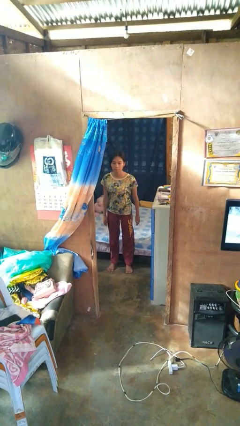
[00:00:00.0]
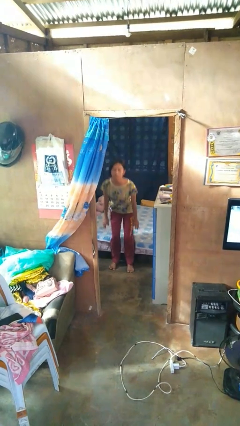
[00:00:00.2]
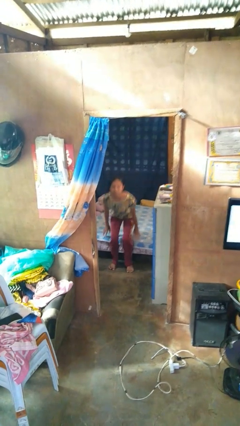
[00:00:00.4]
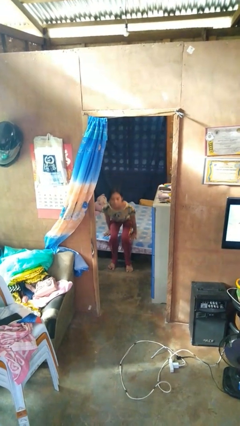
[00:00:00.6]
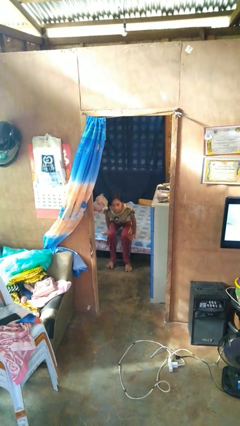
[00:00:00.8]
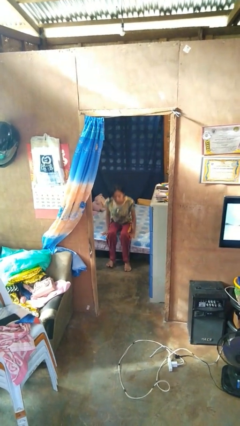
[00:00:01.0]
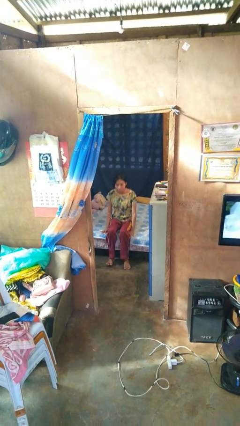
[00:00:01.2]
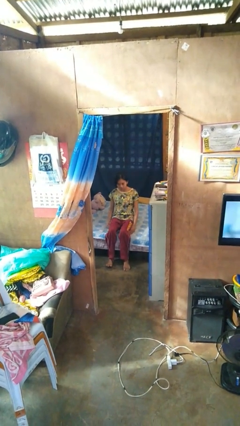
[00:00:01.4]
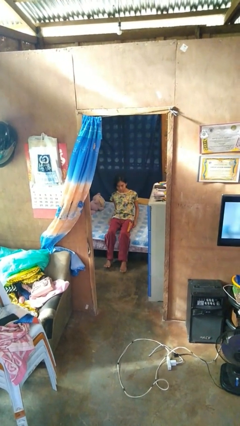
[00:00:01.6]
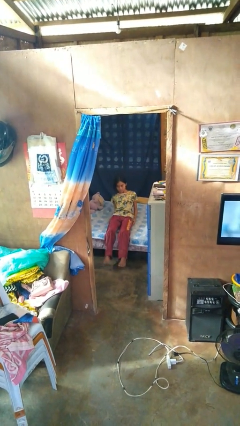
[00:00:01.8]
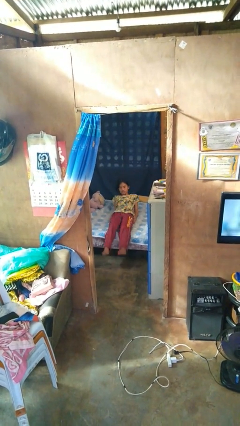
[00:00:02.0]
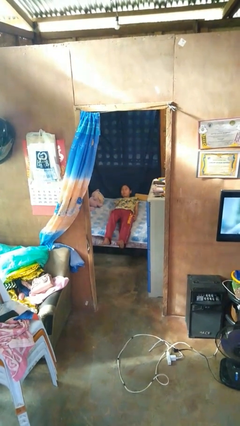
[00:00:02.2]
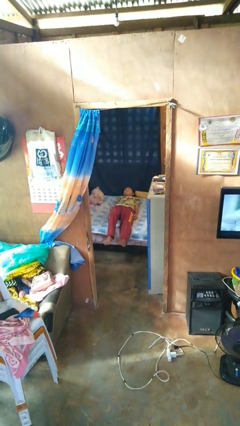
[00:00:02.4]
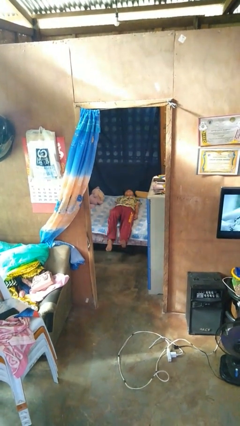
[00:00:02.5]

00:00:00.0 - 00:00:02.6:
person lies down on bed

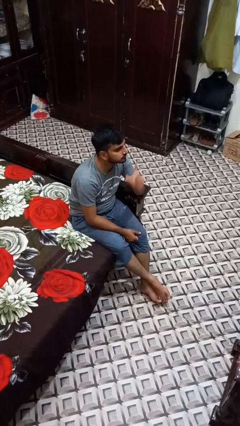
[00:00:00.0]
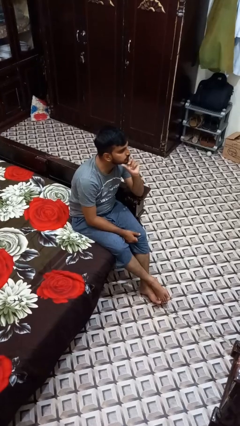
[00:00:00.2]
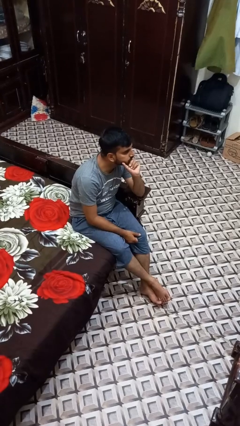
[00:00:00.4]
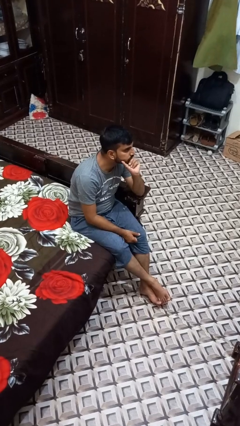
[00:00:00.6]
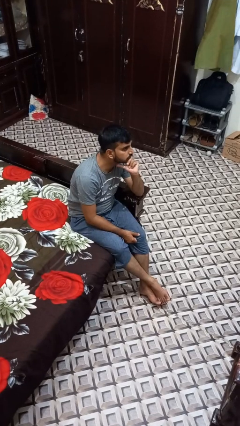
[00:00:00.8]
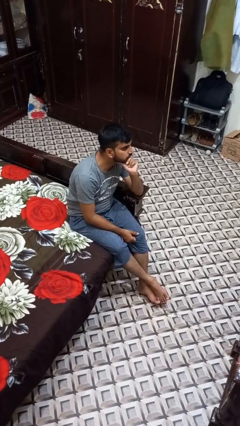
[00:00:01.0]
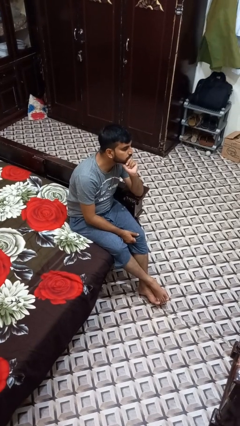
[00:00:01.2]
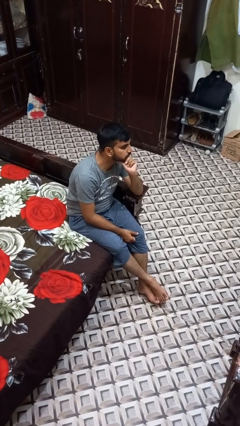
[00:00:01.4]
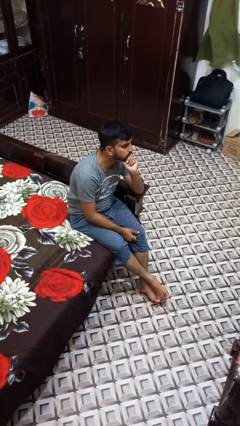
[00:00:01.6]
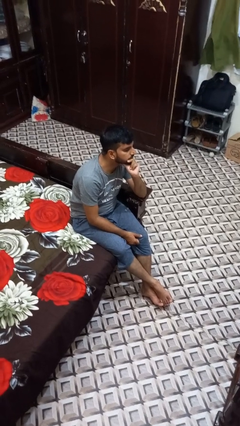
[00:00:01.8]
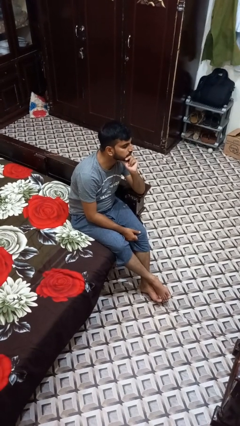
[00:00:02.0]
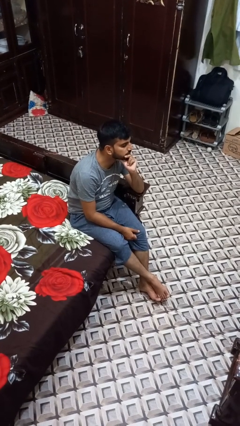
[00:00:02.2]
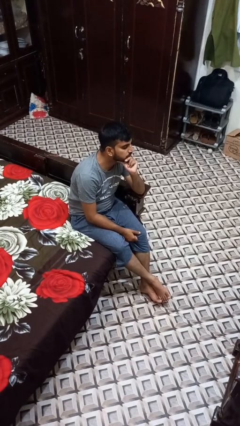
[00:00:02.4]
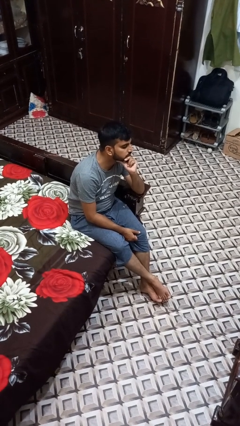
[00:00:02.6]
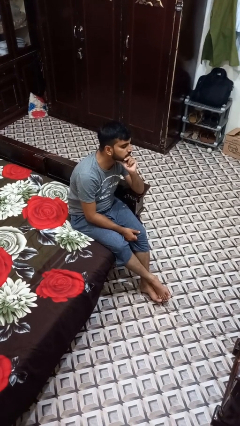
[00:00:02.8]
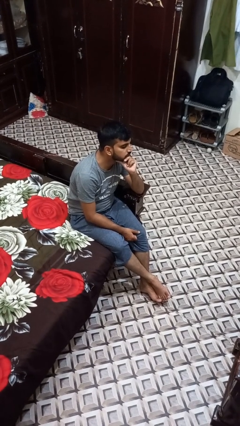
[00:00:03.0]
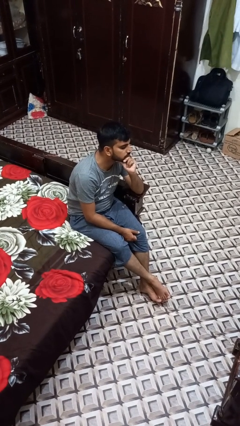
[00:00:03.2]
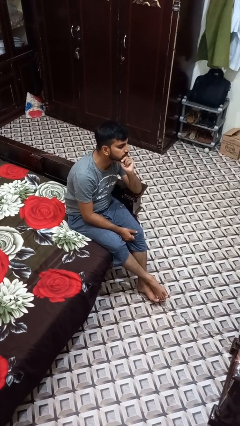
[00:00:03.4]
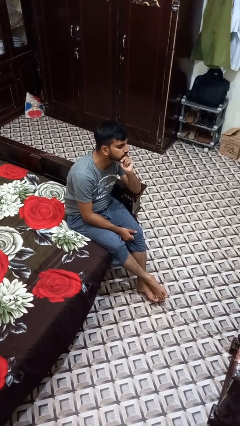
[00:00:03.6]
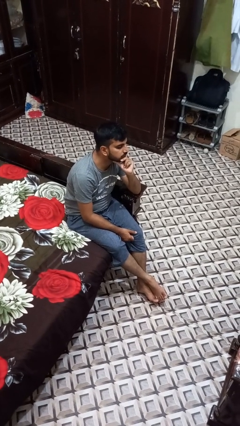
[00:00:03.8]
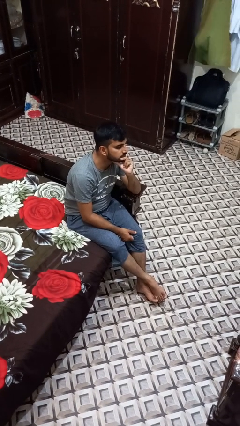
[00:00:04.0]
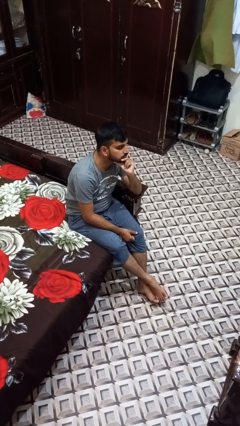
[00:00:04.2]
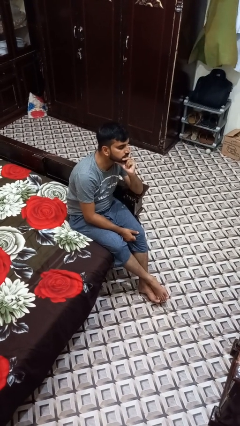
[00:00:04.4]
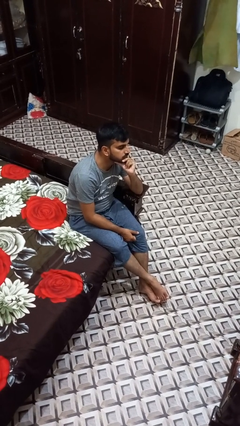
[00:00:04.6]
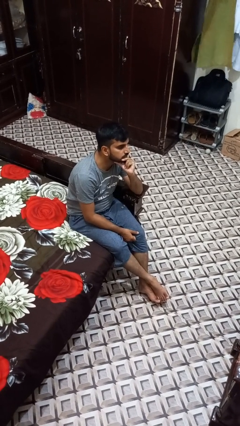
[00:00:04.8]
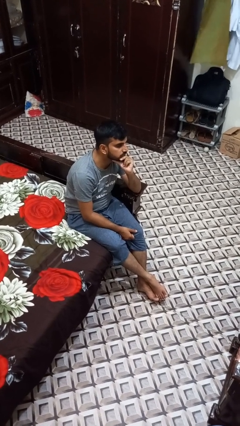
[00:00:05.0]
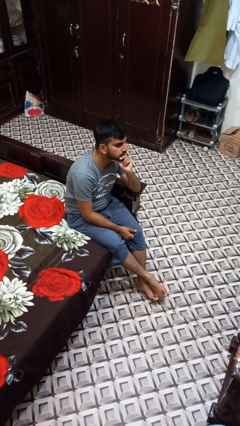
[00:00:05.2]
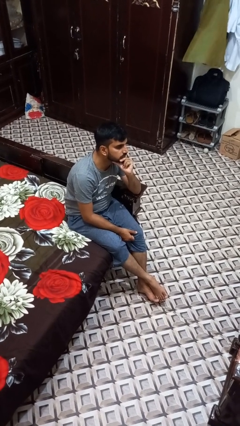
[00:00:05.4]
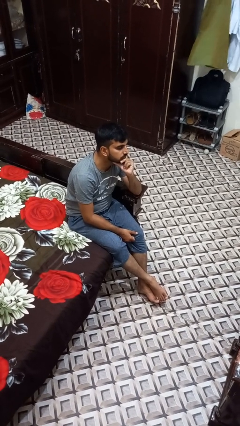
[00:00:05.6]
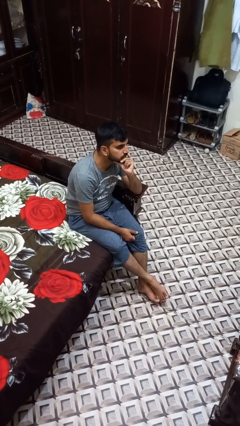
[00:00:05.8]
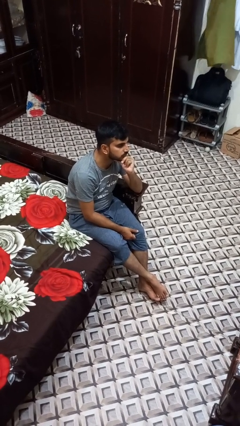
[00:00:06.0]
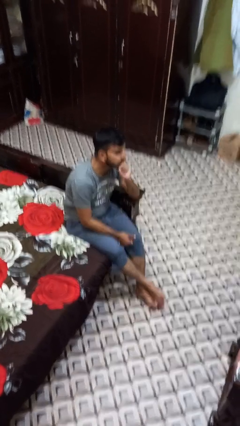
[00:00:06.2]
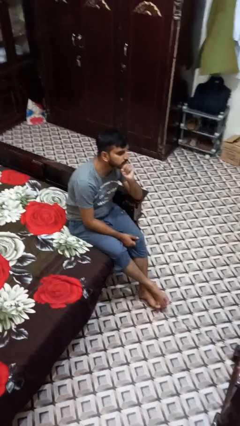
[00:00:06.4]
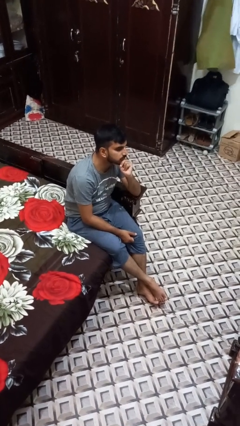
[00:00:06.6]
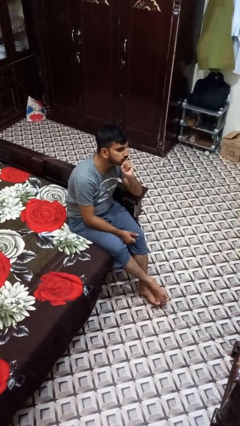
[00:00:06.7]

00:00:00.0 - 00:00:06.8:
person strokes chin

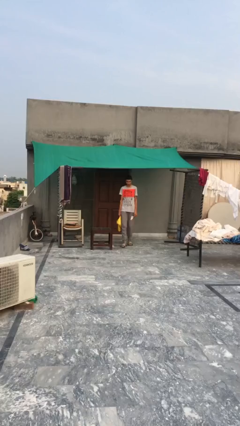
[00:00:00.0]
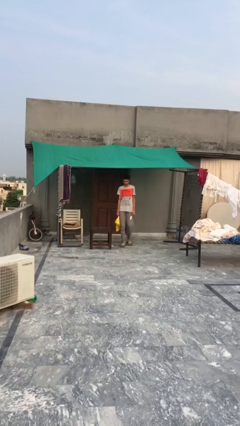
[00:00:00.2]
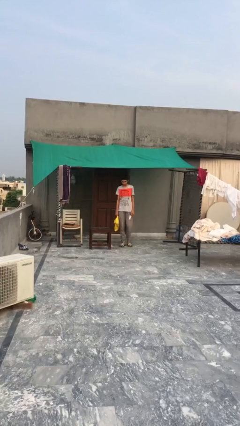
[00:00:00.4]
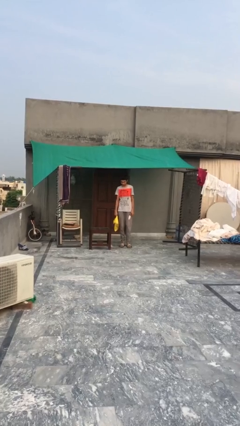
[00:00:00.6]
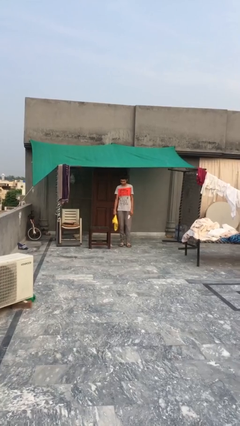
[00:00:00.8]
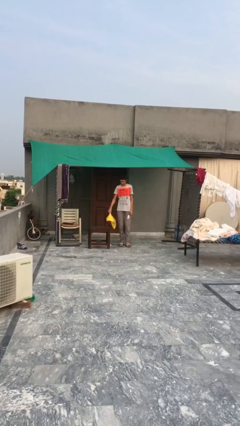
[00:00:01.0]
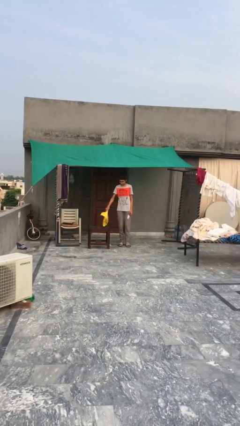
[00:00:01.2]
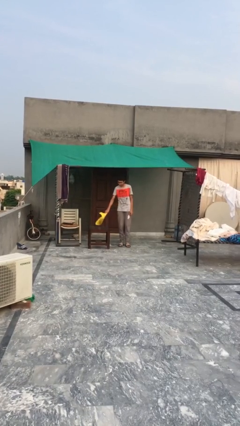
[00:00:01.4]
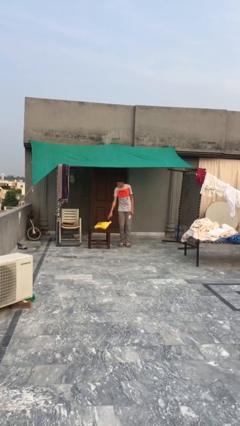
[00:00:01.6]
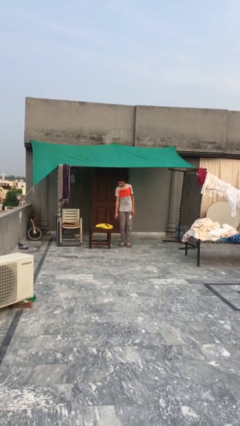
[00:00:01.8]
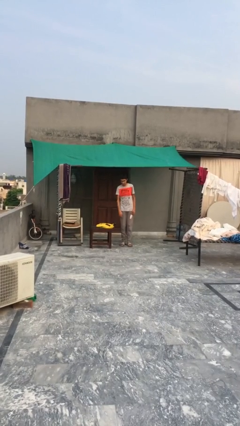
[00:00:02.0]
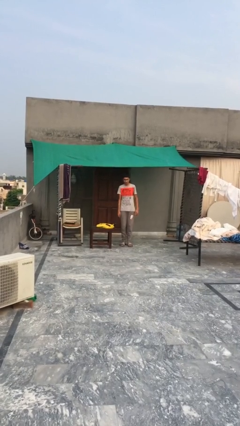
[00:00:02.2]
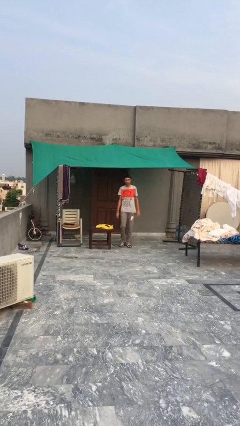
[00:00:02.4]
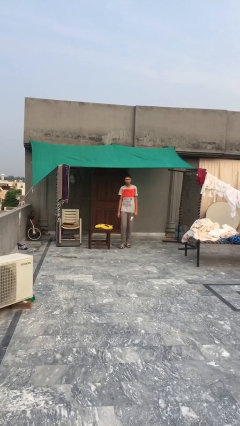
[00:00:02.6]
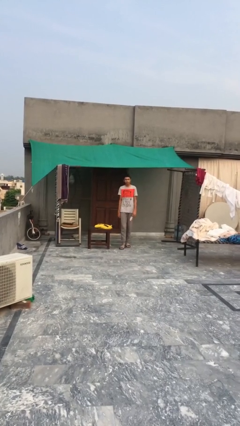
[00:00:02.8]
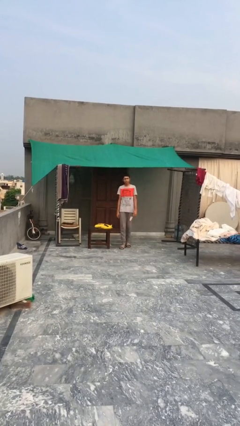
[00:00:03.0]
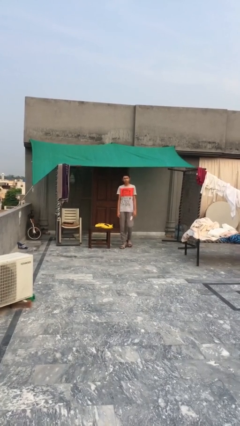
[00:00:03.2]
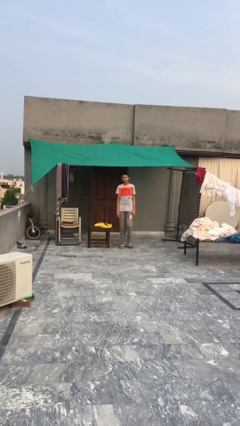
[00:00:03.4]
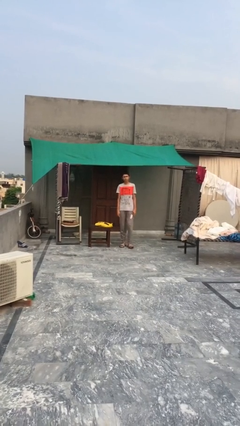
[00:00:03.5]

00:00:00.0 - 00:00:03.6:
person puts down object on table

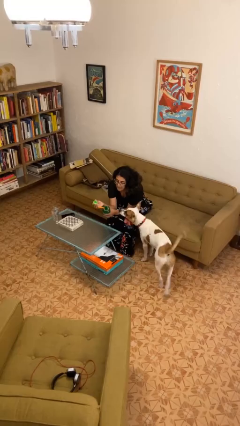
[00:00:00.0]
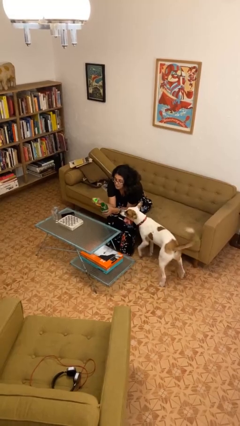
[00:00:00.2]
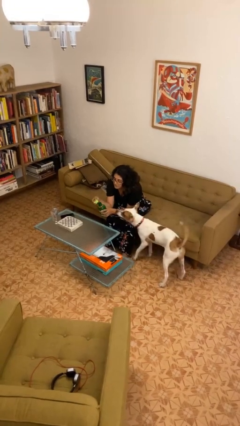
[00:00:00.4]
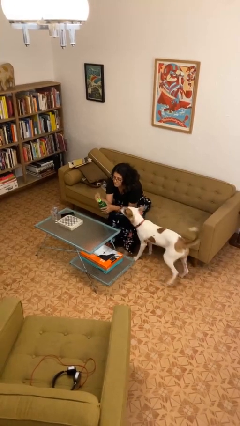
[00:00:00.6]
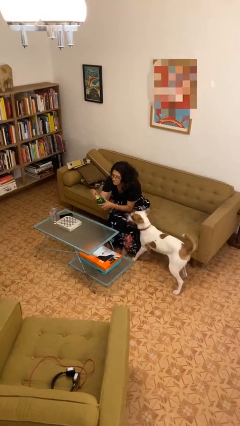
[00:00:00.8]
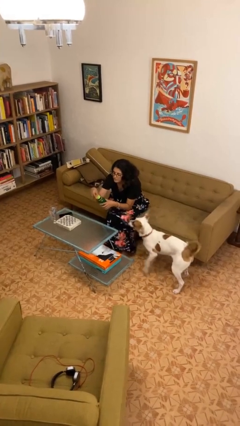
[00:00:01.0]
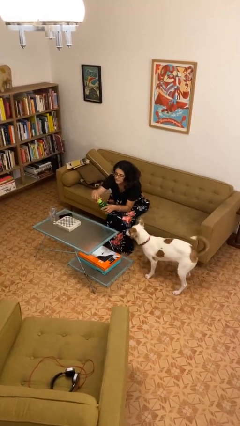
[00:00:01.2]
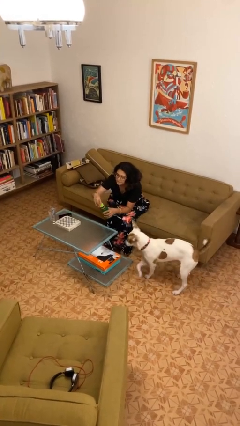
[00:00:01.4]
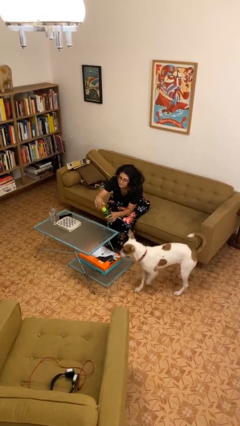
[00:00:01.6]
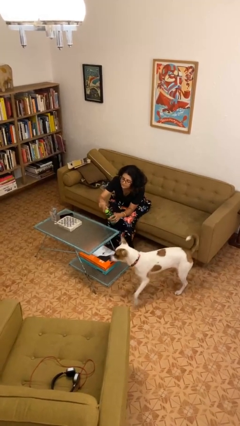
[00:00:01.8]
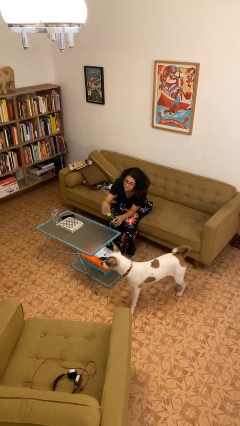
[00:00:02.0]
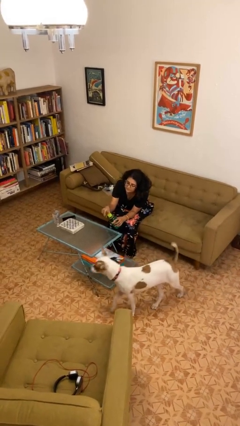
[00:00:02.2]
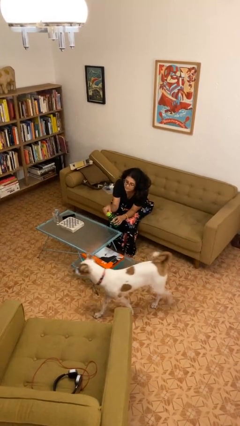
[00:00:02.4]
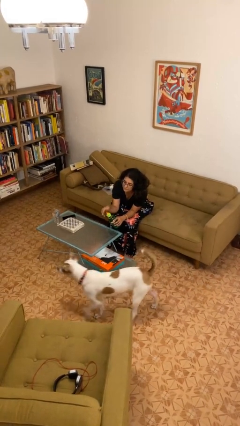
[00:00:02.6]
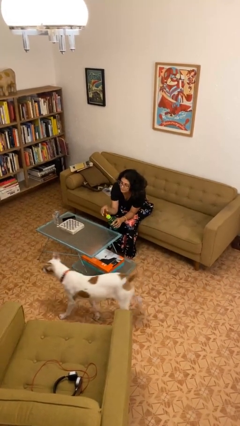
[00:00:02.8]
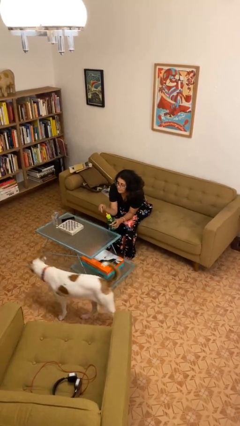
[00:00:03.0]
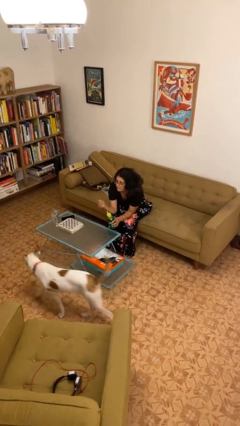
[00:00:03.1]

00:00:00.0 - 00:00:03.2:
person screws lid to bottle

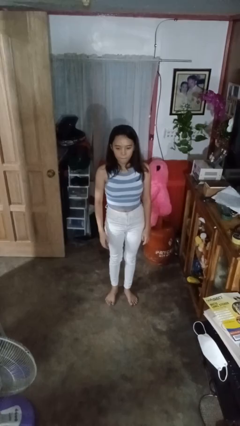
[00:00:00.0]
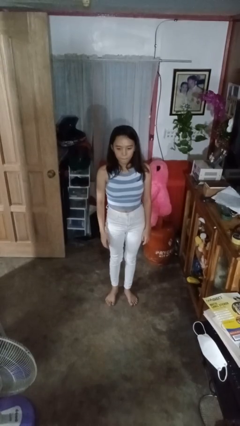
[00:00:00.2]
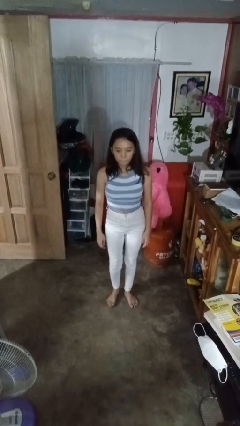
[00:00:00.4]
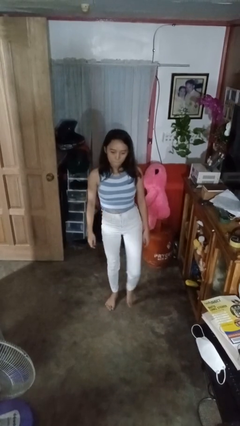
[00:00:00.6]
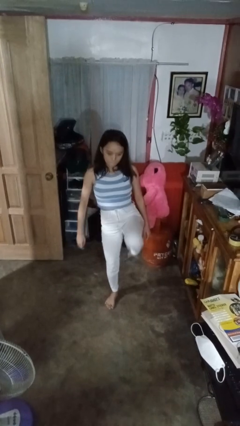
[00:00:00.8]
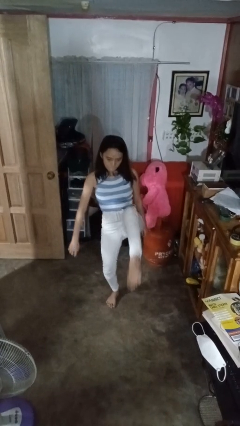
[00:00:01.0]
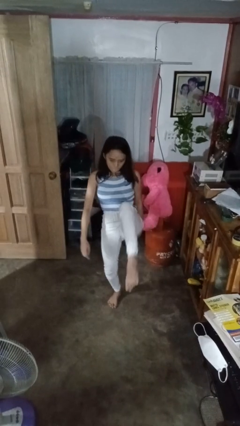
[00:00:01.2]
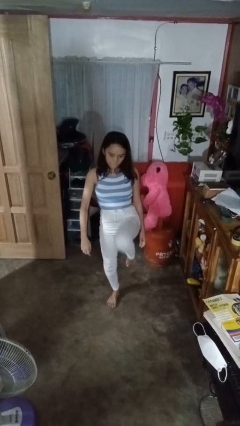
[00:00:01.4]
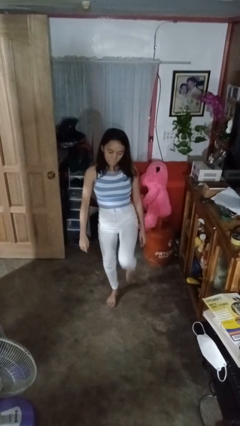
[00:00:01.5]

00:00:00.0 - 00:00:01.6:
person karate kicks
